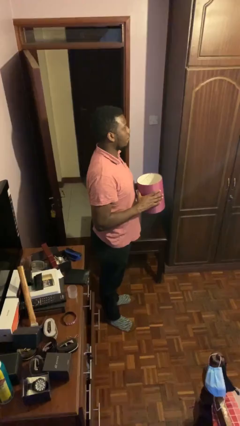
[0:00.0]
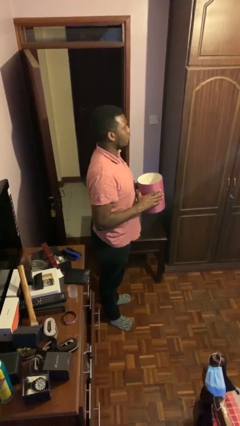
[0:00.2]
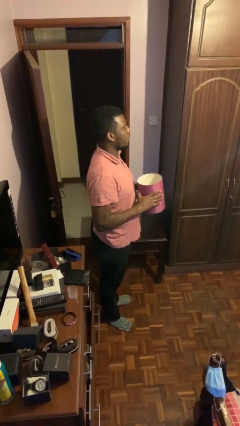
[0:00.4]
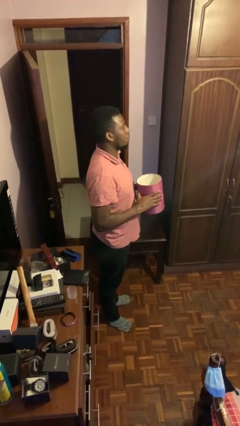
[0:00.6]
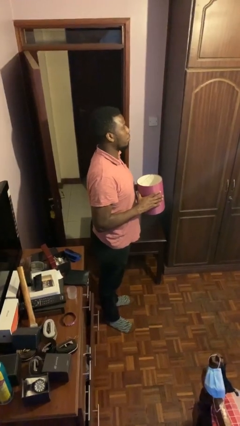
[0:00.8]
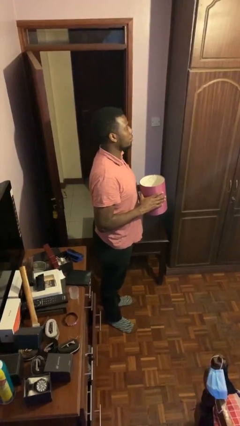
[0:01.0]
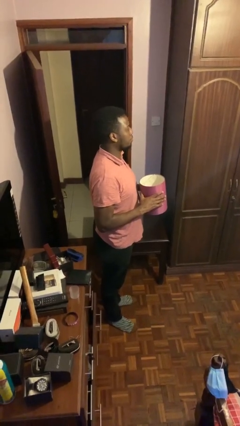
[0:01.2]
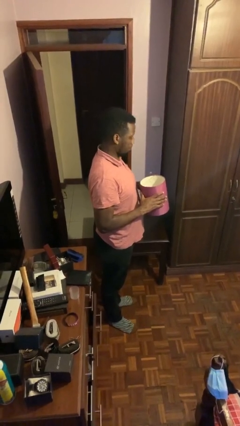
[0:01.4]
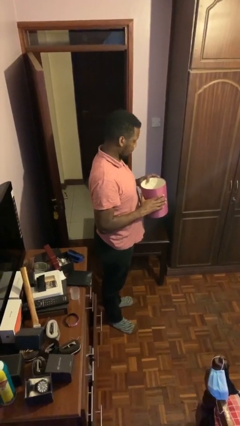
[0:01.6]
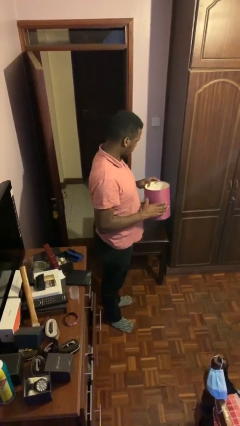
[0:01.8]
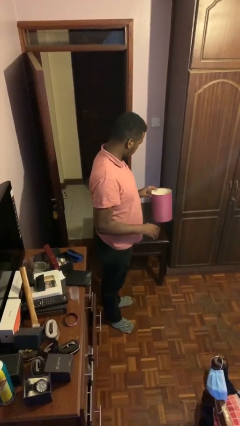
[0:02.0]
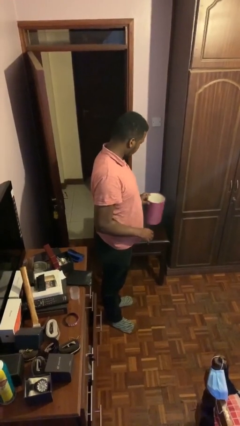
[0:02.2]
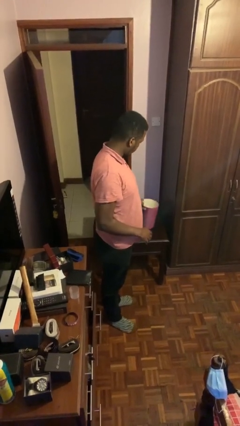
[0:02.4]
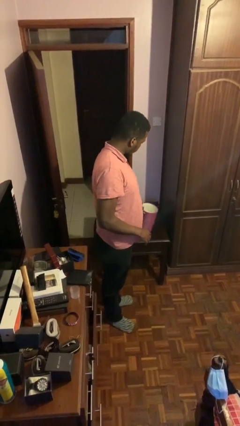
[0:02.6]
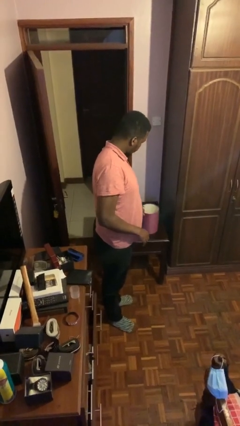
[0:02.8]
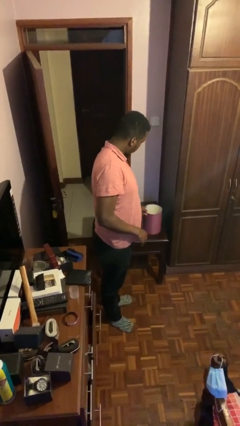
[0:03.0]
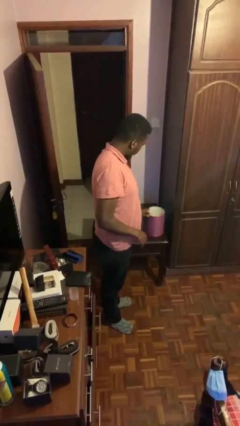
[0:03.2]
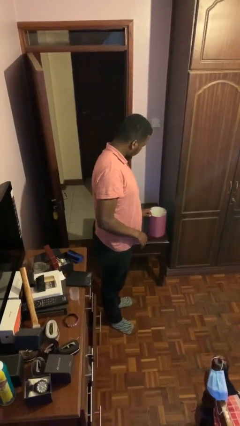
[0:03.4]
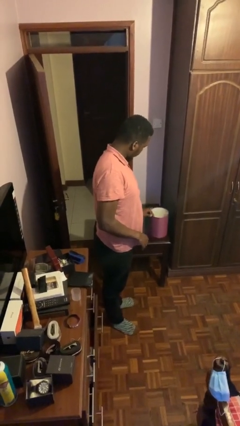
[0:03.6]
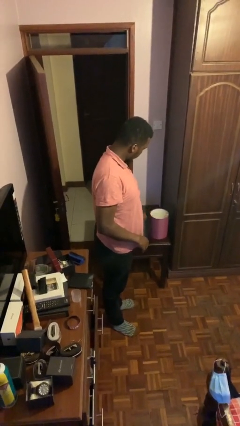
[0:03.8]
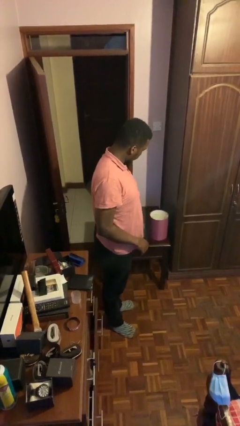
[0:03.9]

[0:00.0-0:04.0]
person puts down object on table

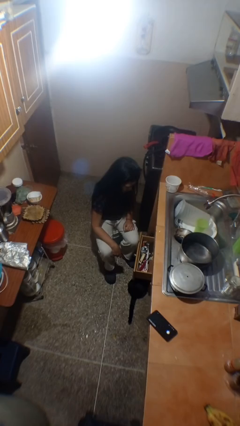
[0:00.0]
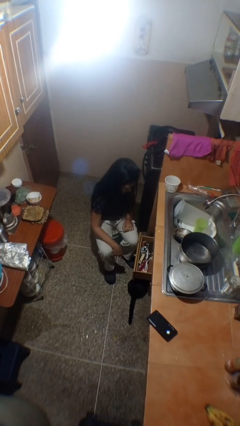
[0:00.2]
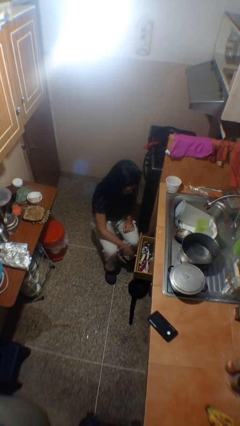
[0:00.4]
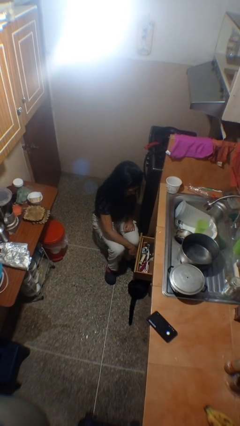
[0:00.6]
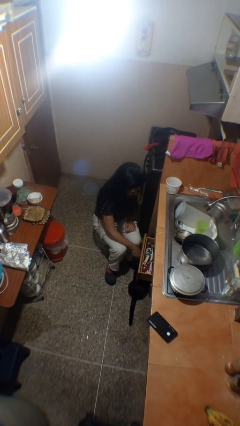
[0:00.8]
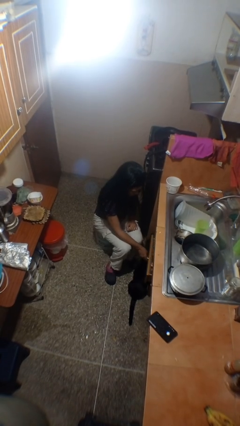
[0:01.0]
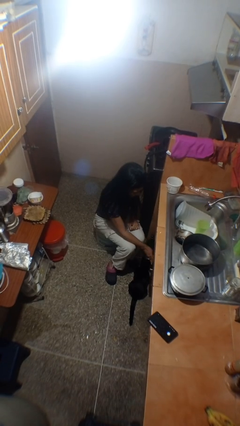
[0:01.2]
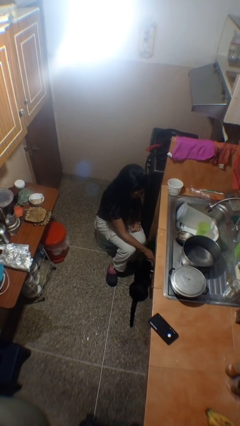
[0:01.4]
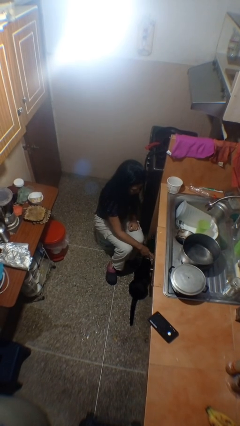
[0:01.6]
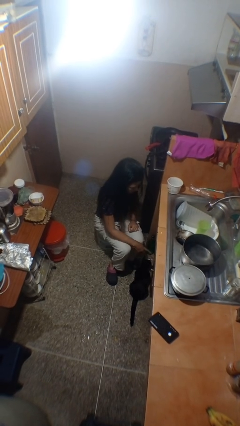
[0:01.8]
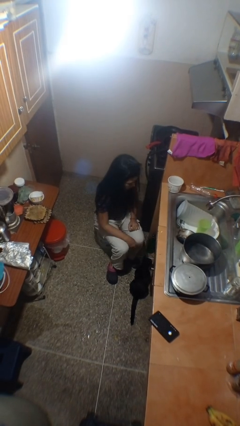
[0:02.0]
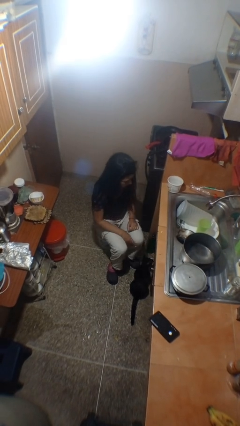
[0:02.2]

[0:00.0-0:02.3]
person closes kitchen drawer

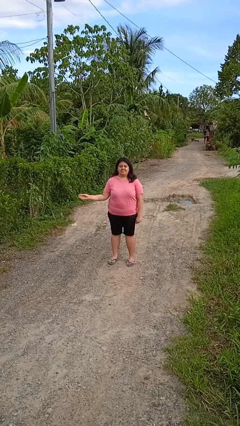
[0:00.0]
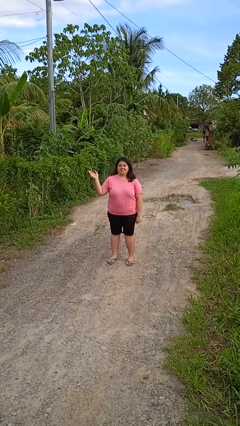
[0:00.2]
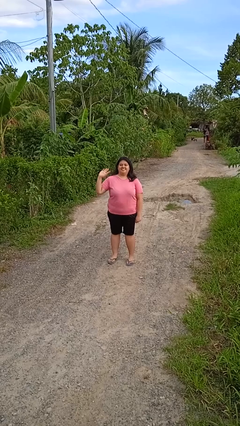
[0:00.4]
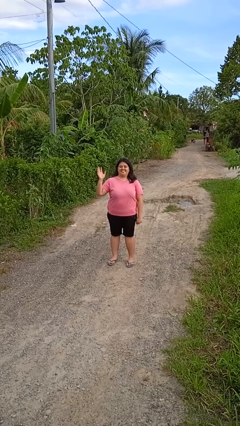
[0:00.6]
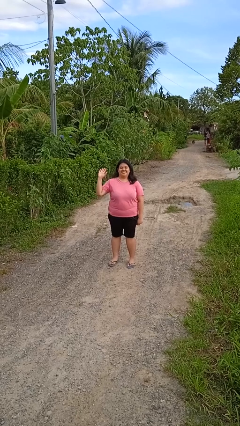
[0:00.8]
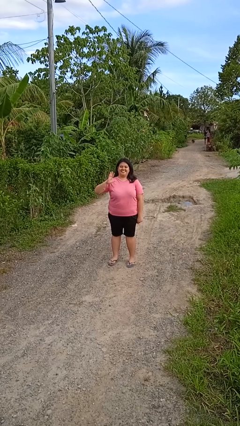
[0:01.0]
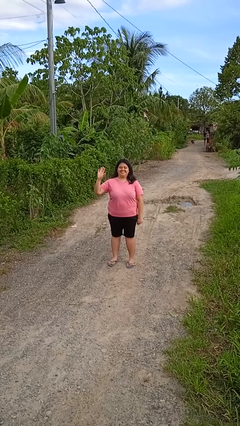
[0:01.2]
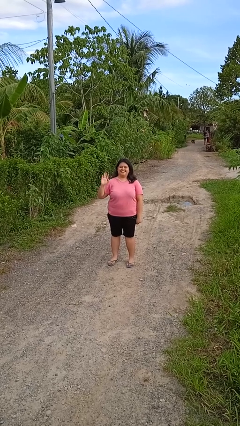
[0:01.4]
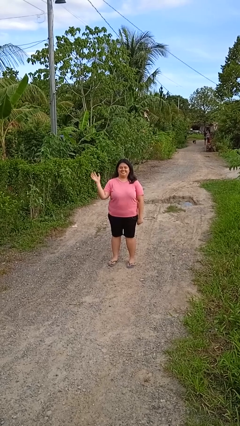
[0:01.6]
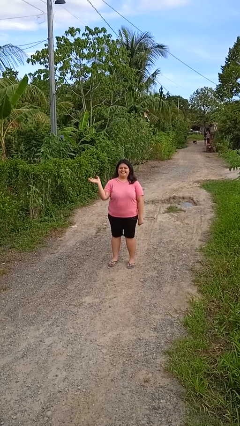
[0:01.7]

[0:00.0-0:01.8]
person waves at person

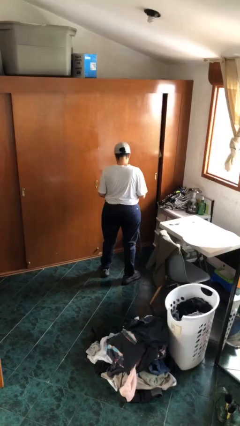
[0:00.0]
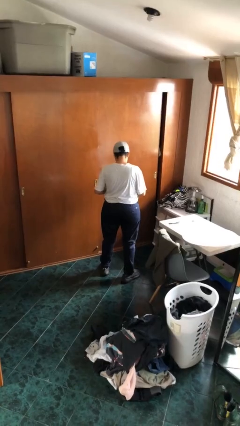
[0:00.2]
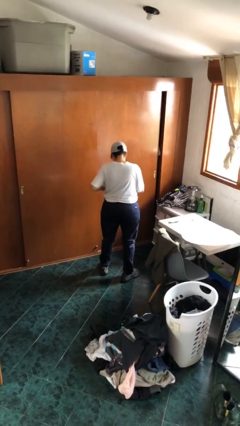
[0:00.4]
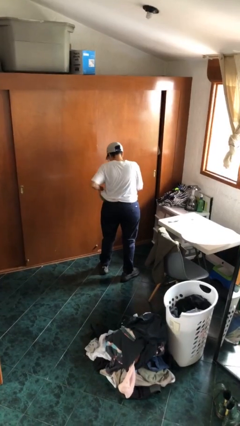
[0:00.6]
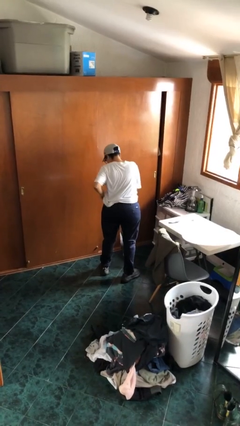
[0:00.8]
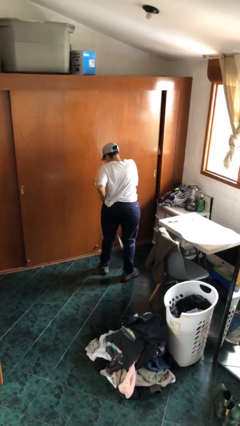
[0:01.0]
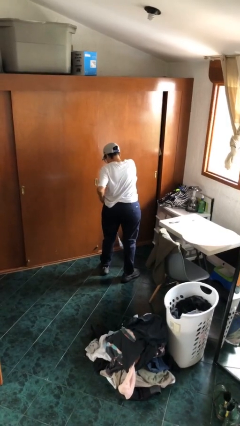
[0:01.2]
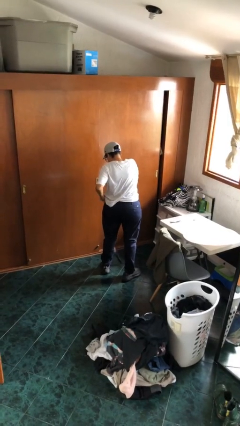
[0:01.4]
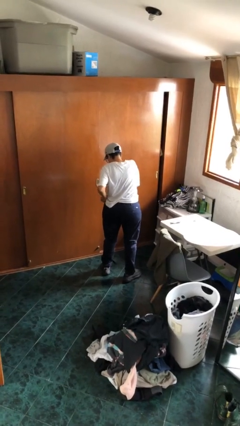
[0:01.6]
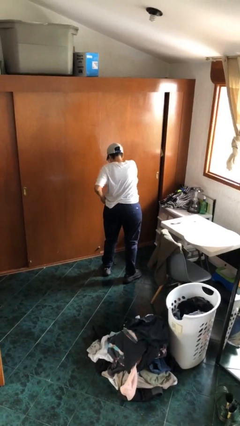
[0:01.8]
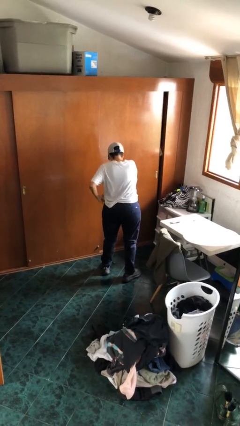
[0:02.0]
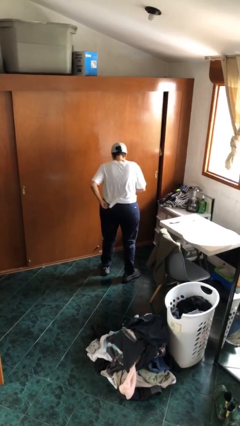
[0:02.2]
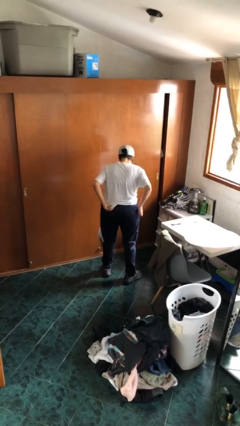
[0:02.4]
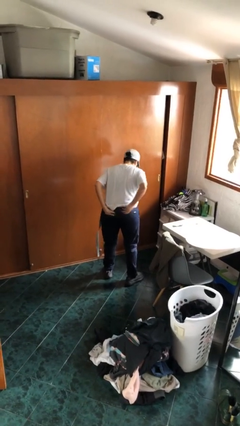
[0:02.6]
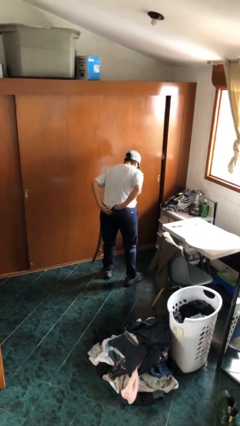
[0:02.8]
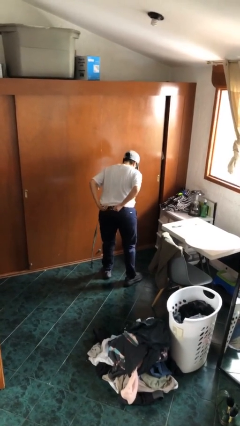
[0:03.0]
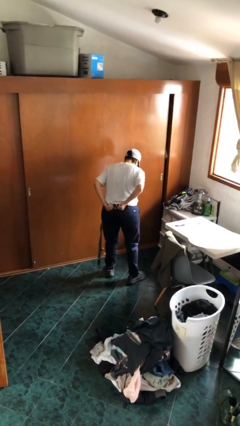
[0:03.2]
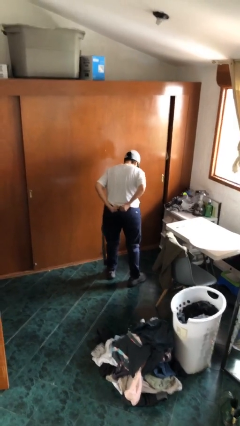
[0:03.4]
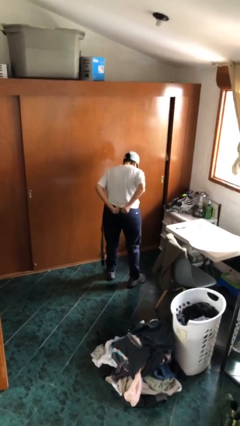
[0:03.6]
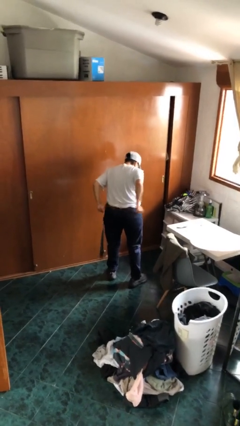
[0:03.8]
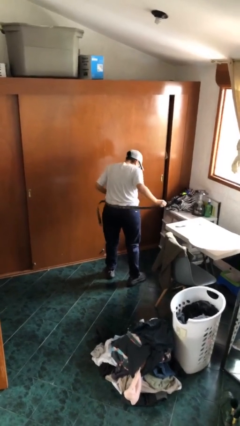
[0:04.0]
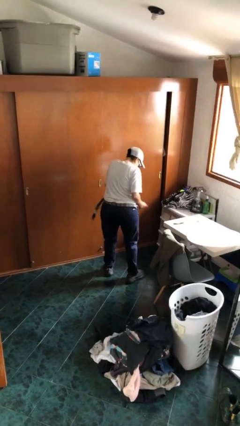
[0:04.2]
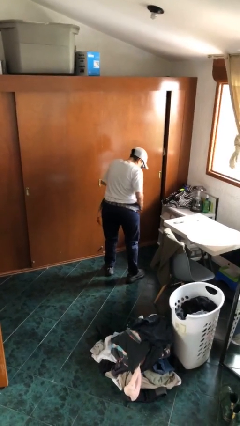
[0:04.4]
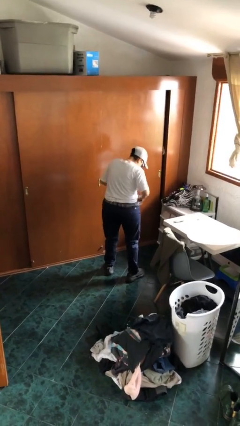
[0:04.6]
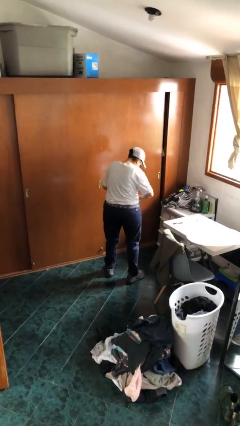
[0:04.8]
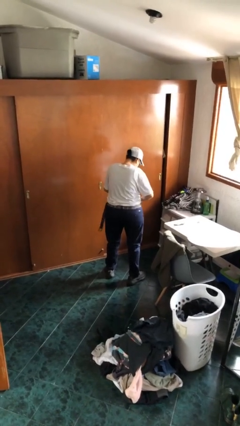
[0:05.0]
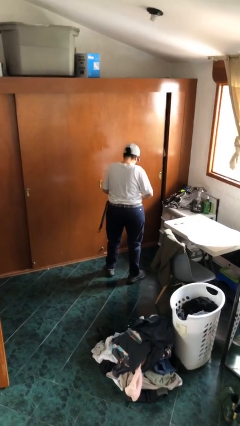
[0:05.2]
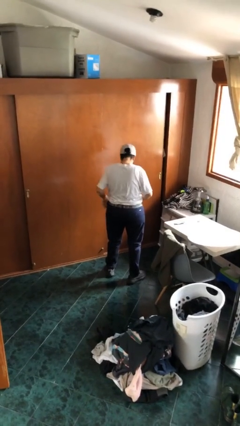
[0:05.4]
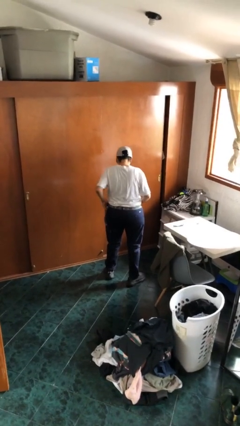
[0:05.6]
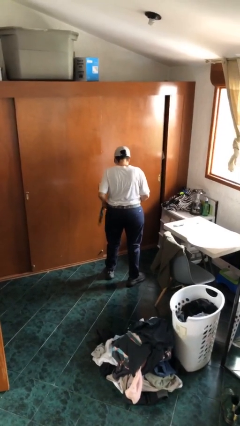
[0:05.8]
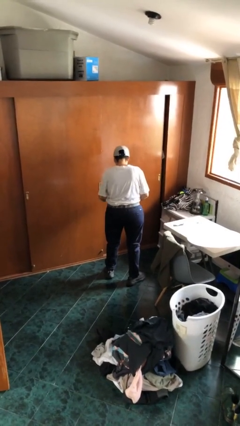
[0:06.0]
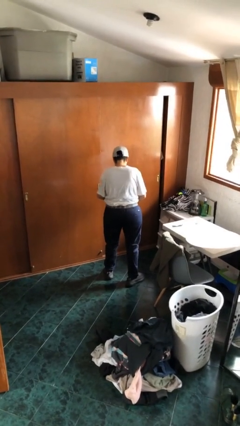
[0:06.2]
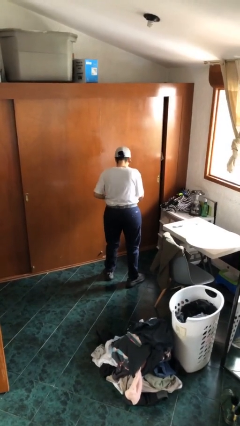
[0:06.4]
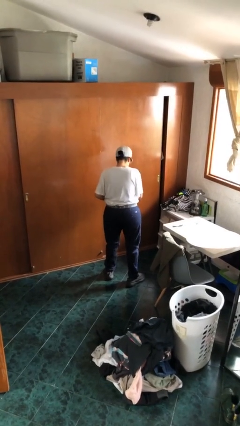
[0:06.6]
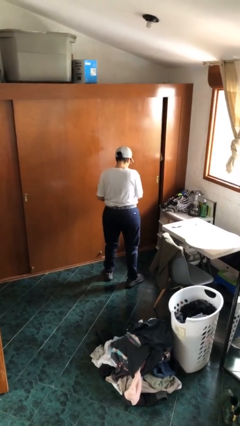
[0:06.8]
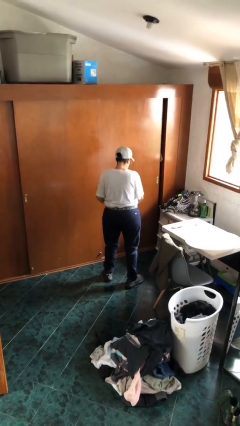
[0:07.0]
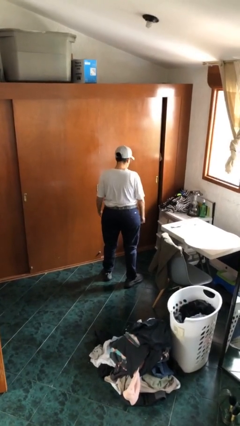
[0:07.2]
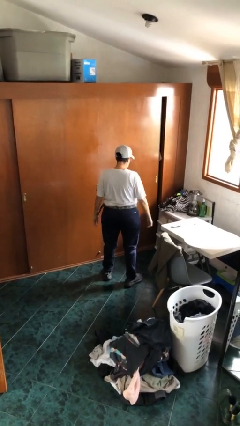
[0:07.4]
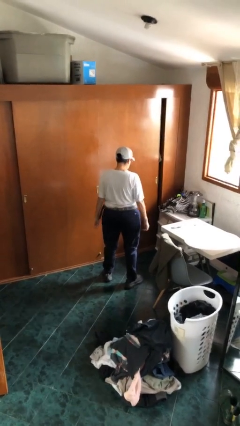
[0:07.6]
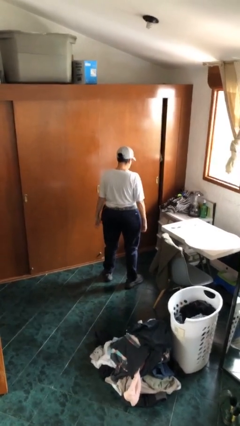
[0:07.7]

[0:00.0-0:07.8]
person puts on belt

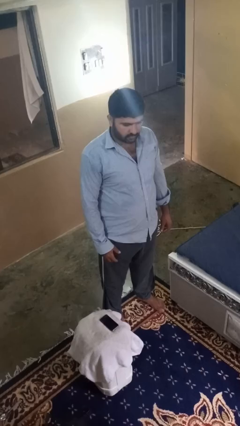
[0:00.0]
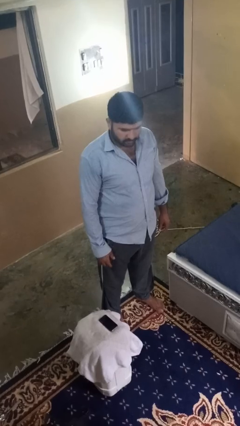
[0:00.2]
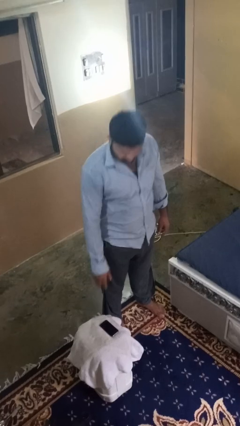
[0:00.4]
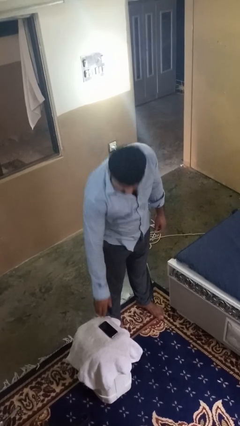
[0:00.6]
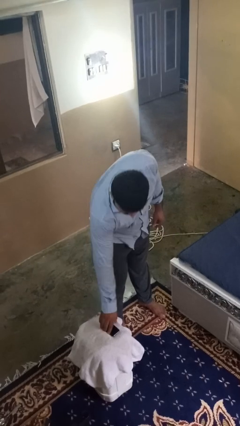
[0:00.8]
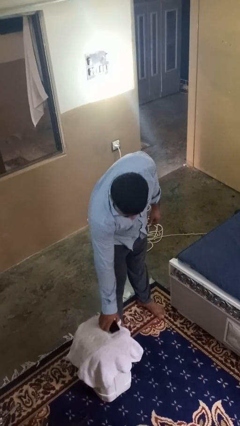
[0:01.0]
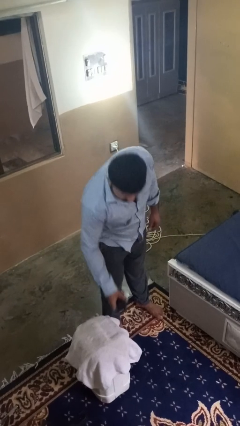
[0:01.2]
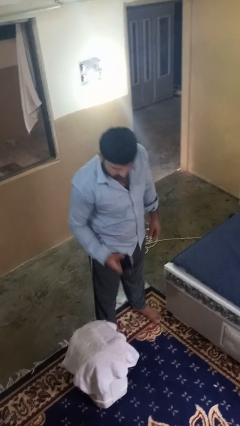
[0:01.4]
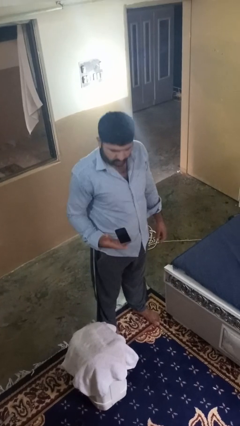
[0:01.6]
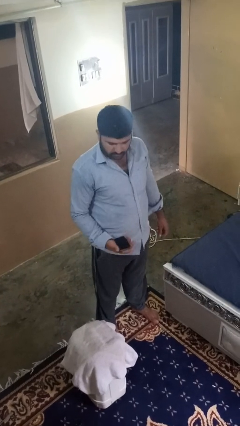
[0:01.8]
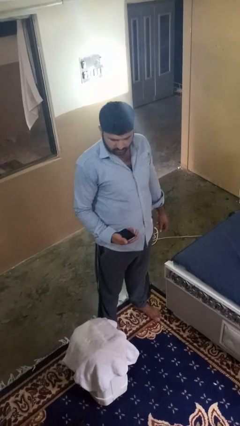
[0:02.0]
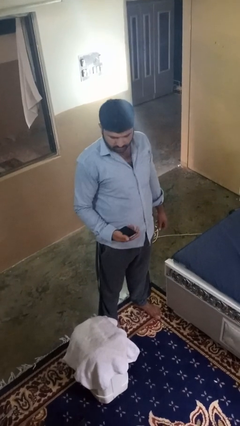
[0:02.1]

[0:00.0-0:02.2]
person takes phone from pocket
